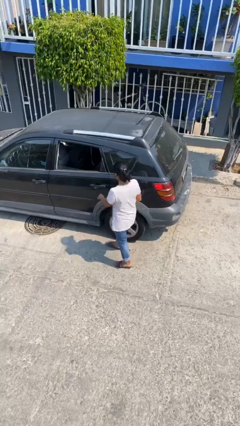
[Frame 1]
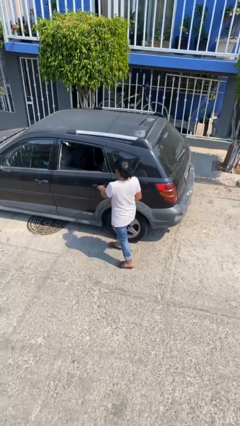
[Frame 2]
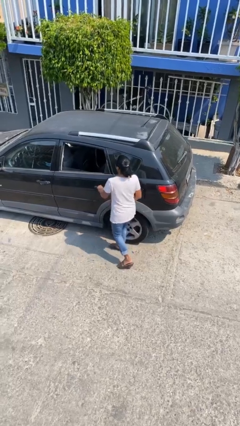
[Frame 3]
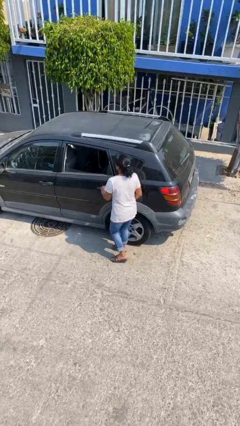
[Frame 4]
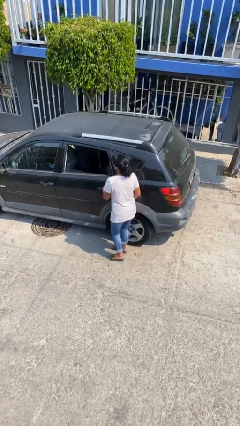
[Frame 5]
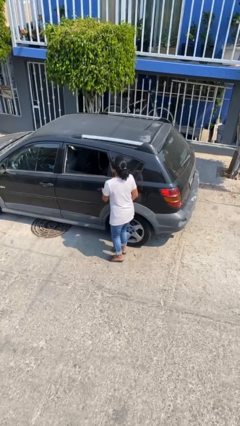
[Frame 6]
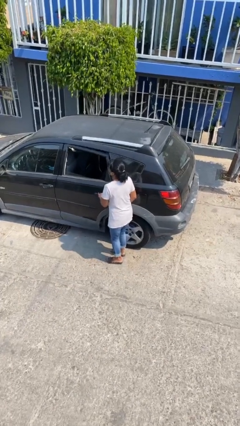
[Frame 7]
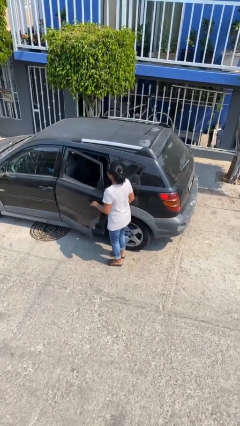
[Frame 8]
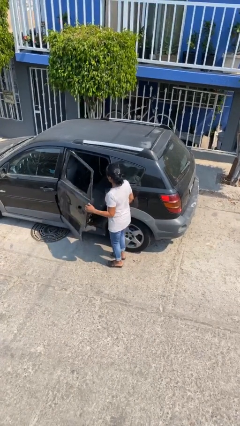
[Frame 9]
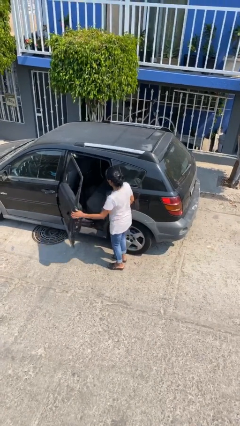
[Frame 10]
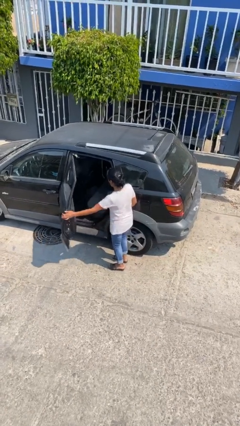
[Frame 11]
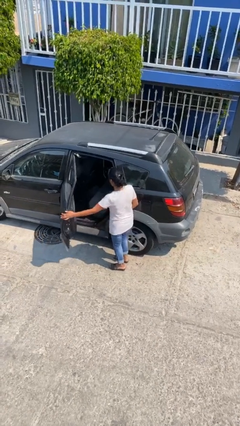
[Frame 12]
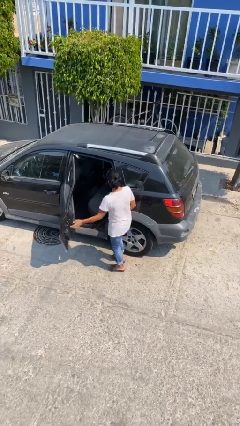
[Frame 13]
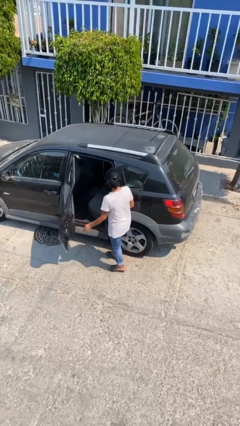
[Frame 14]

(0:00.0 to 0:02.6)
person opens car door

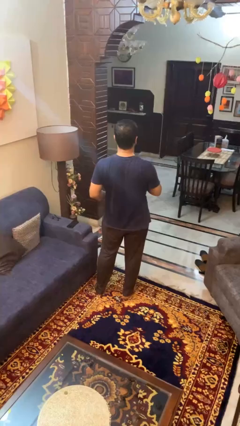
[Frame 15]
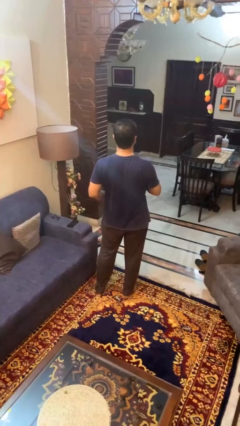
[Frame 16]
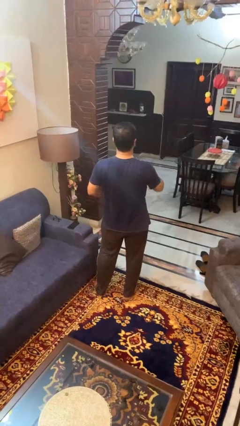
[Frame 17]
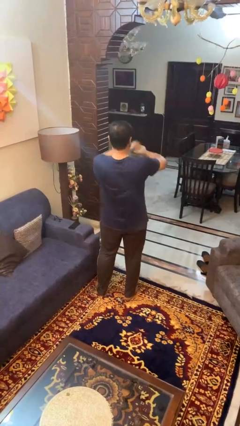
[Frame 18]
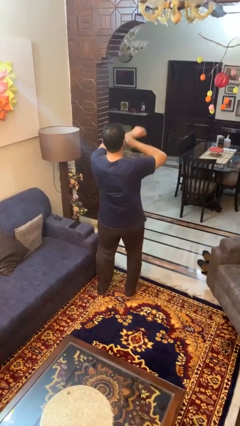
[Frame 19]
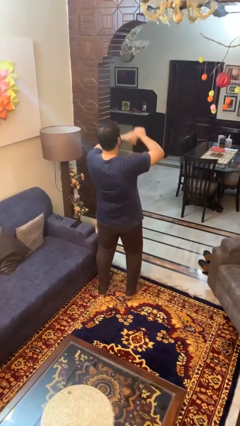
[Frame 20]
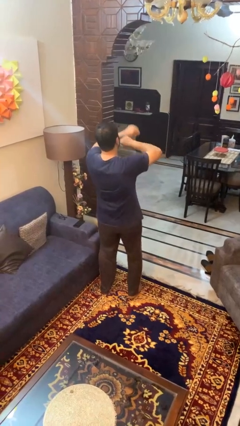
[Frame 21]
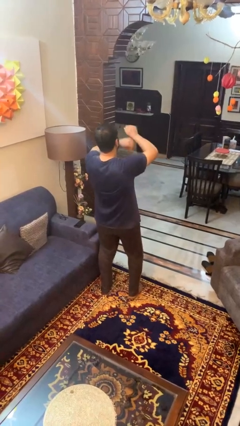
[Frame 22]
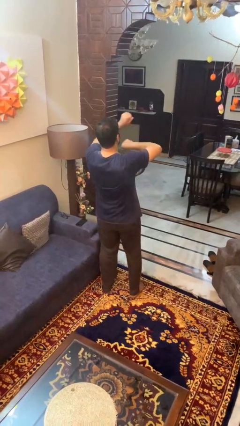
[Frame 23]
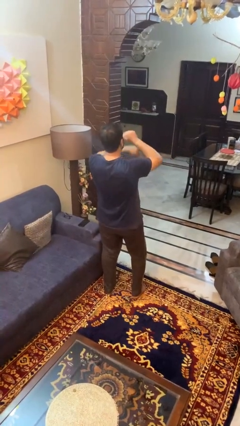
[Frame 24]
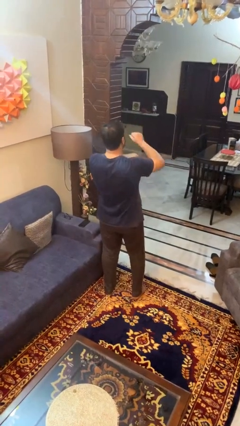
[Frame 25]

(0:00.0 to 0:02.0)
person dances in place

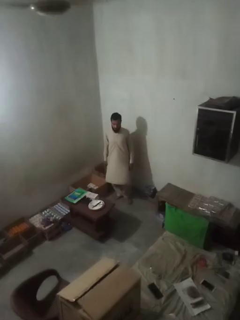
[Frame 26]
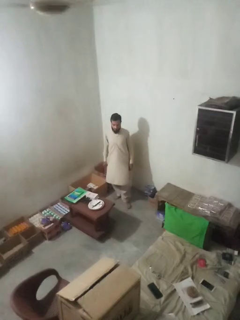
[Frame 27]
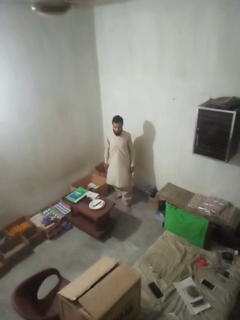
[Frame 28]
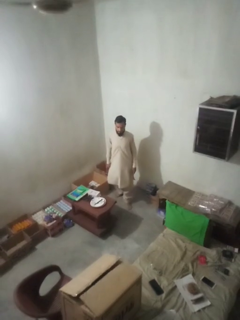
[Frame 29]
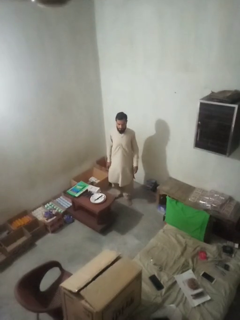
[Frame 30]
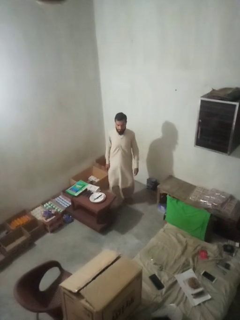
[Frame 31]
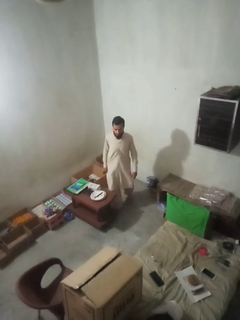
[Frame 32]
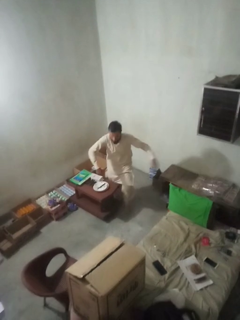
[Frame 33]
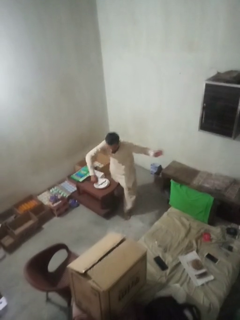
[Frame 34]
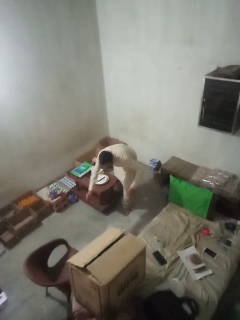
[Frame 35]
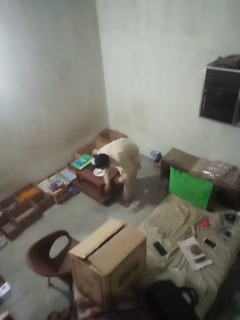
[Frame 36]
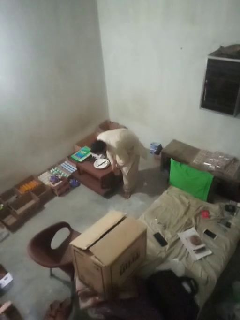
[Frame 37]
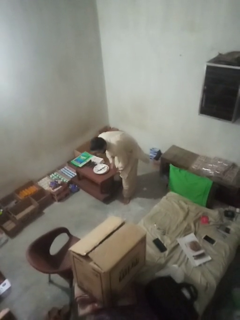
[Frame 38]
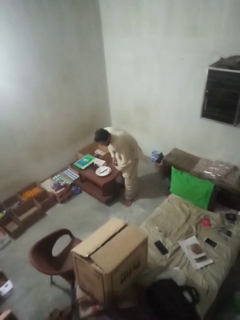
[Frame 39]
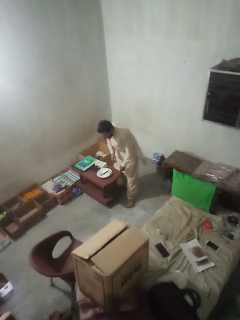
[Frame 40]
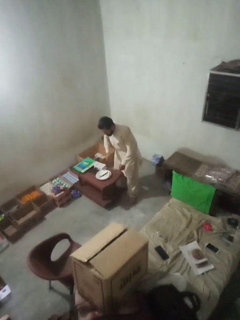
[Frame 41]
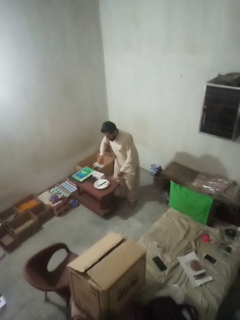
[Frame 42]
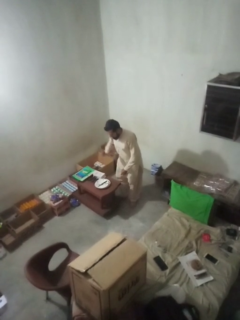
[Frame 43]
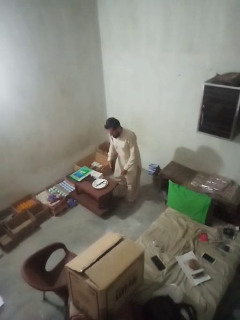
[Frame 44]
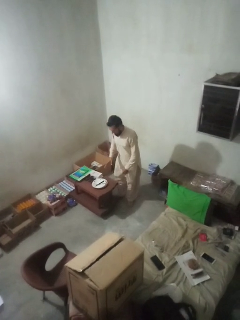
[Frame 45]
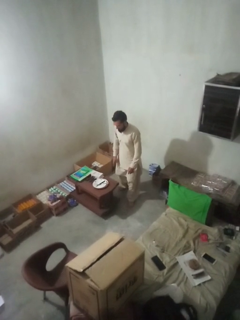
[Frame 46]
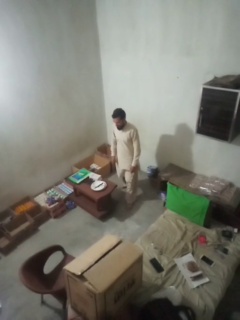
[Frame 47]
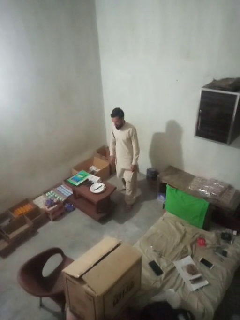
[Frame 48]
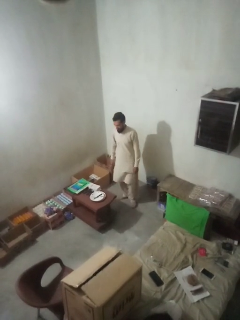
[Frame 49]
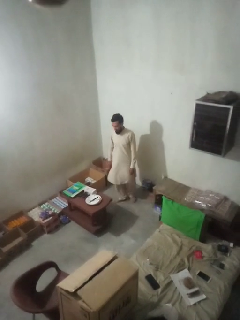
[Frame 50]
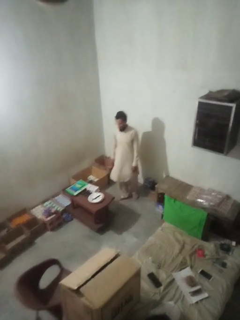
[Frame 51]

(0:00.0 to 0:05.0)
person bumps into table

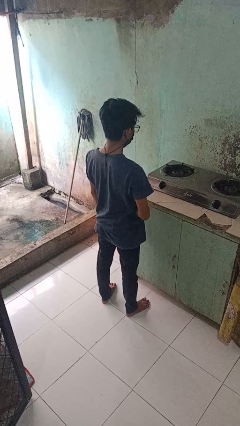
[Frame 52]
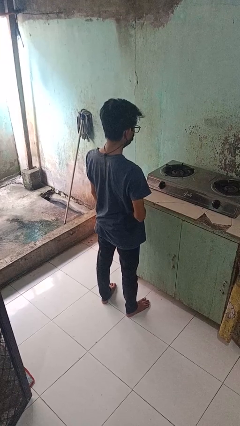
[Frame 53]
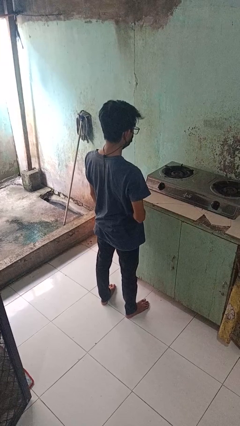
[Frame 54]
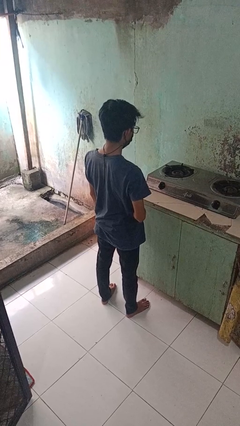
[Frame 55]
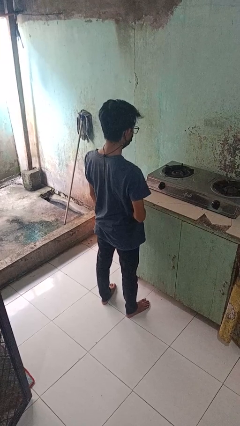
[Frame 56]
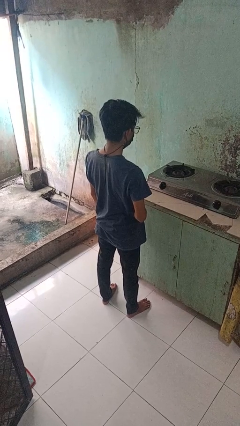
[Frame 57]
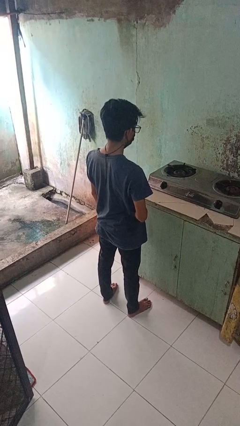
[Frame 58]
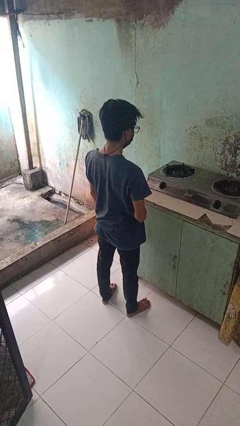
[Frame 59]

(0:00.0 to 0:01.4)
person turns off stovetop

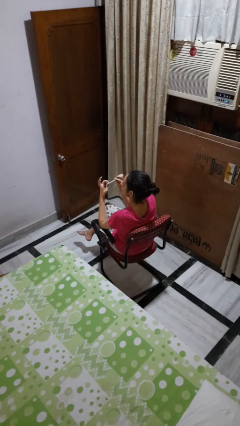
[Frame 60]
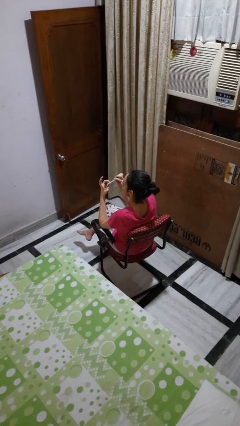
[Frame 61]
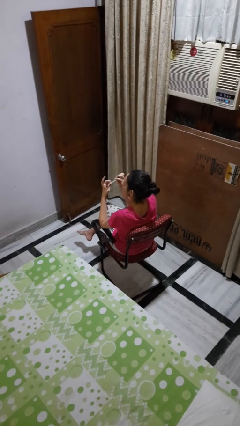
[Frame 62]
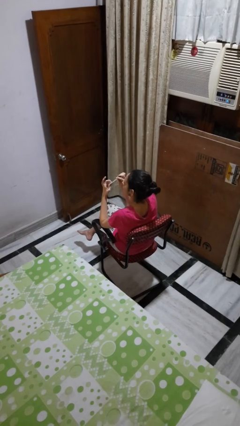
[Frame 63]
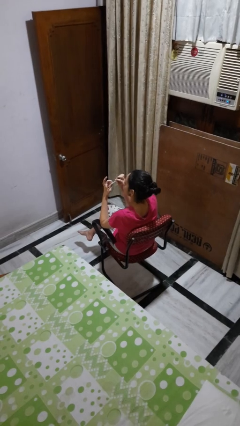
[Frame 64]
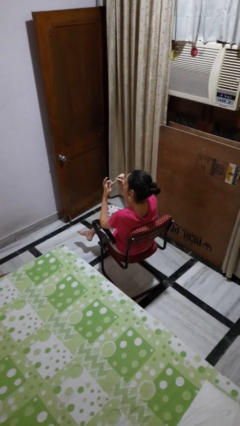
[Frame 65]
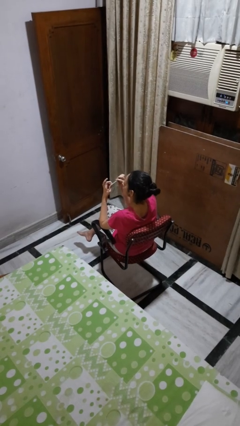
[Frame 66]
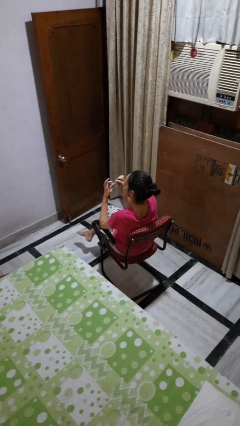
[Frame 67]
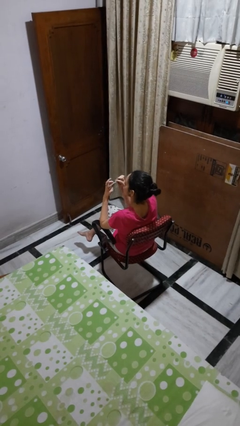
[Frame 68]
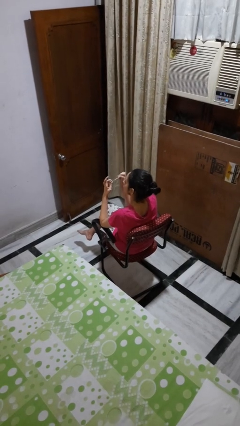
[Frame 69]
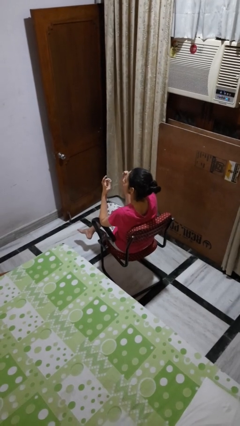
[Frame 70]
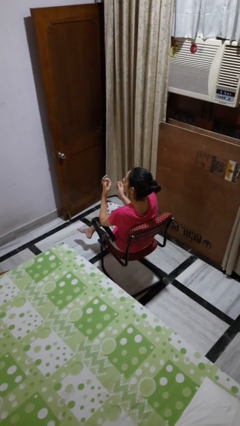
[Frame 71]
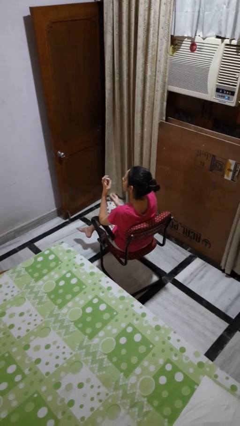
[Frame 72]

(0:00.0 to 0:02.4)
person files fingernails

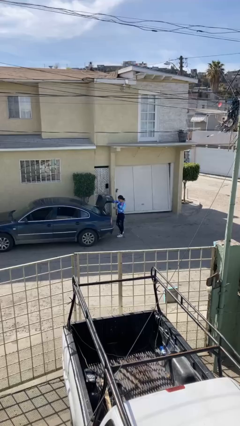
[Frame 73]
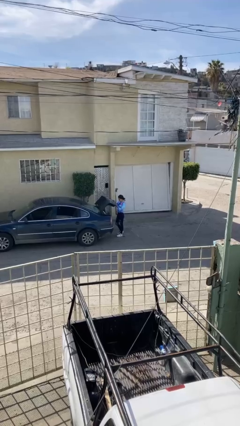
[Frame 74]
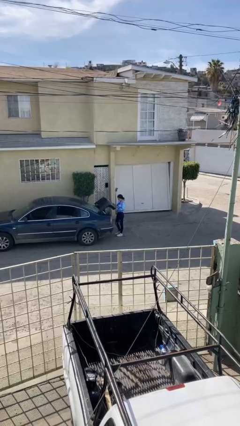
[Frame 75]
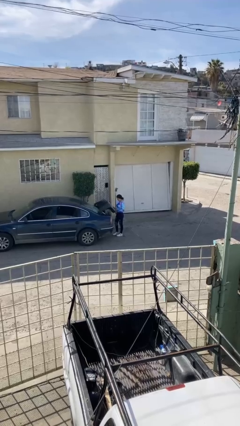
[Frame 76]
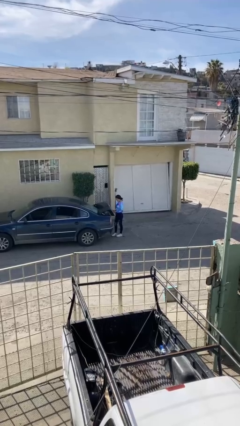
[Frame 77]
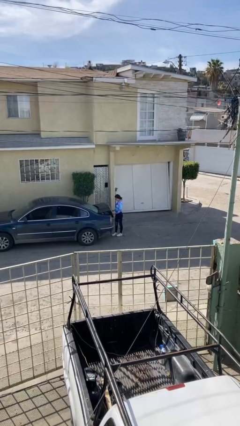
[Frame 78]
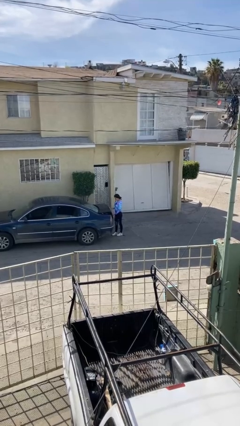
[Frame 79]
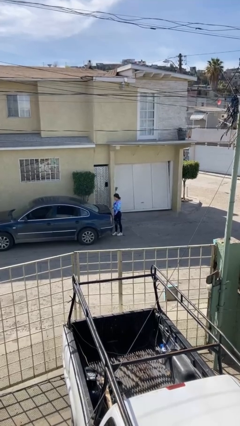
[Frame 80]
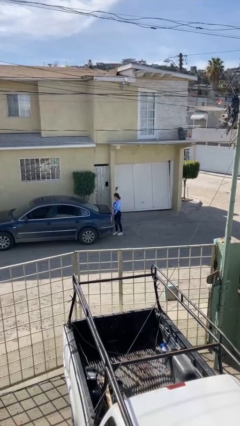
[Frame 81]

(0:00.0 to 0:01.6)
person closes car trunk

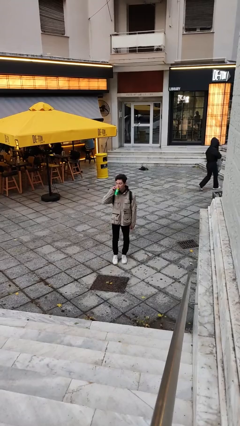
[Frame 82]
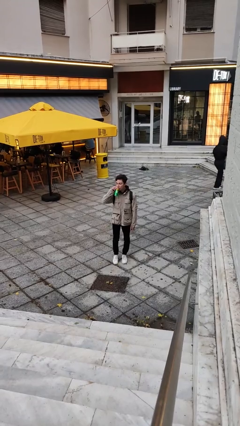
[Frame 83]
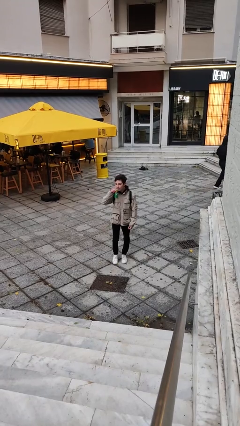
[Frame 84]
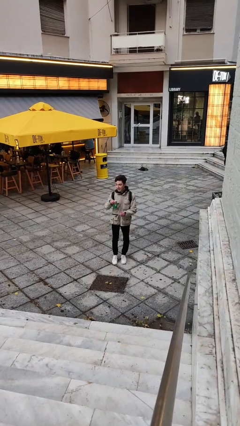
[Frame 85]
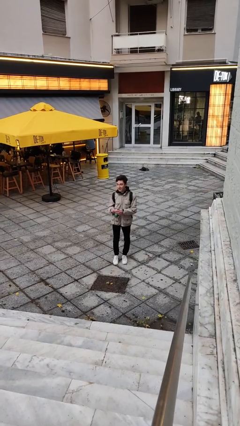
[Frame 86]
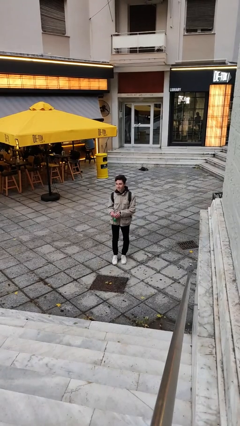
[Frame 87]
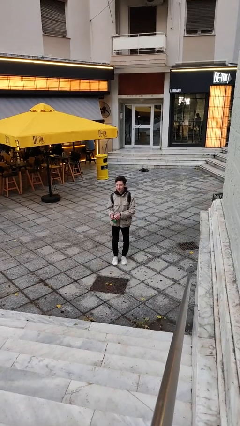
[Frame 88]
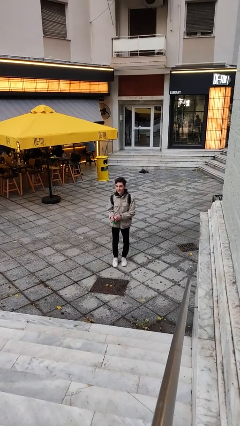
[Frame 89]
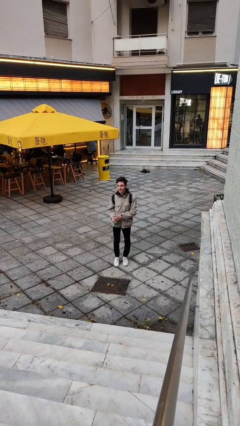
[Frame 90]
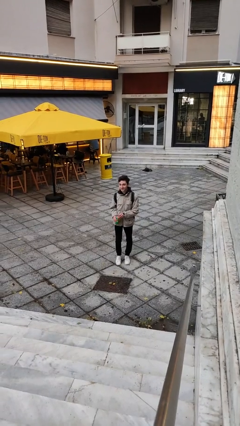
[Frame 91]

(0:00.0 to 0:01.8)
person drinks from beverage can

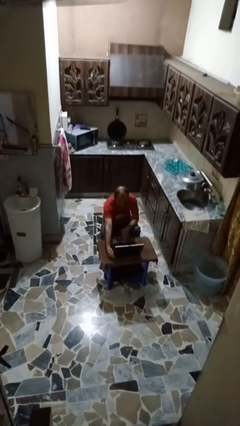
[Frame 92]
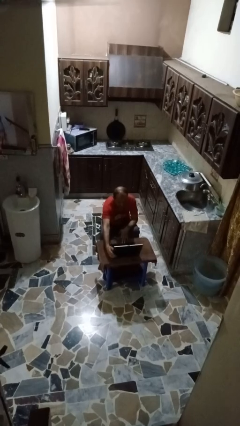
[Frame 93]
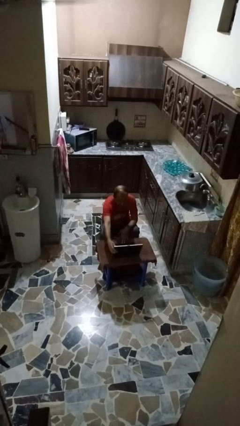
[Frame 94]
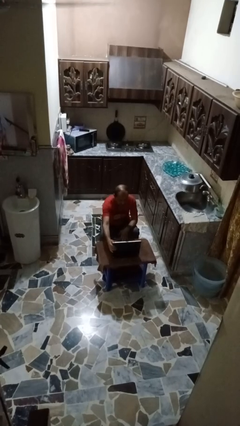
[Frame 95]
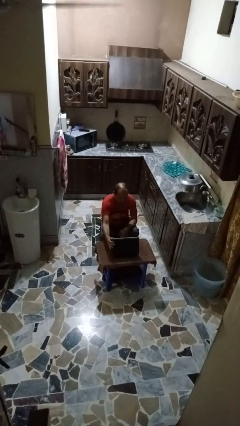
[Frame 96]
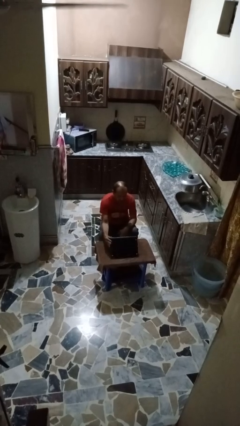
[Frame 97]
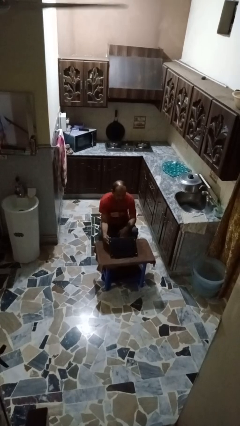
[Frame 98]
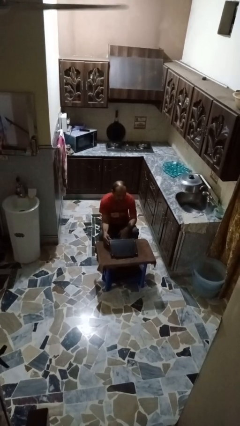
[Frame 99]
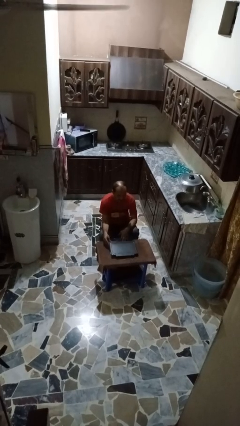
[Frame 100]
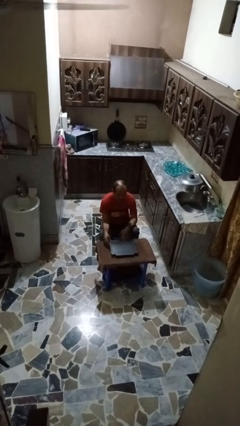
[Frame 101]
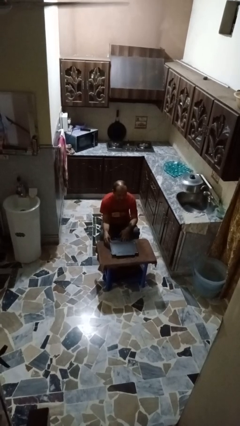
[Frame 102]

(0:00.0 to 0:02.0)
person closes laptop
